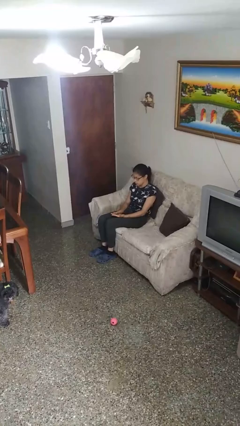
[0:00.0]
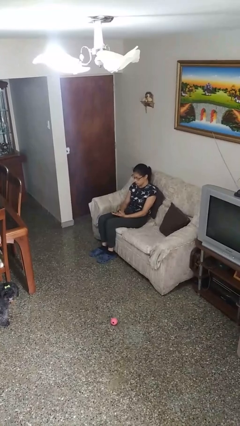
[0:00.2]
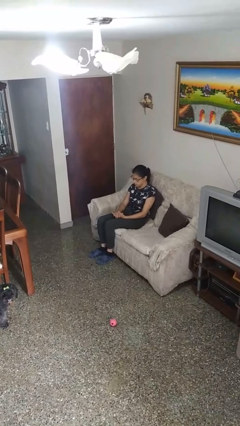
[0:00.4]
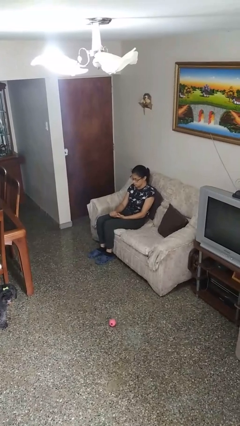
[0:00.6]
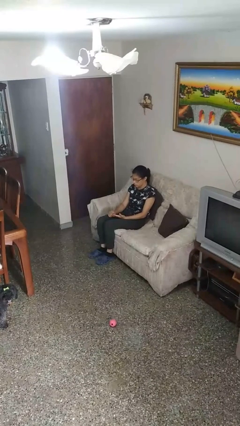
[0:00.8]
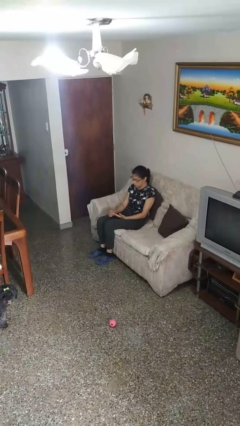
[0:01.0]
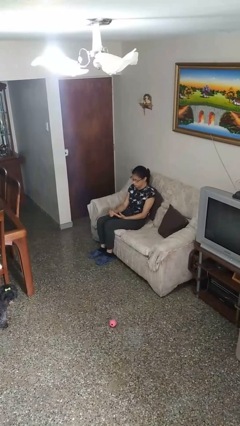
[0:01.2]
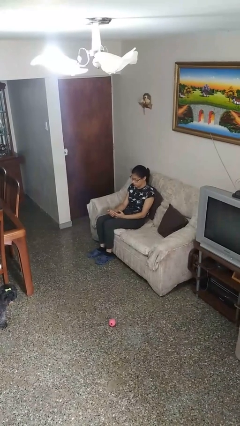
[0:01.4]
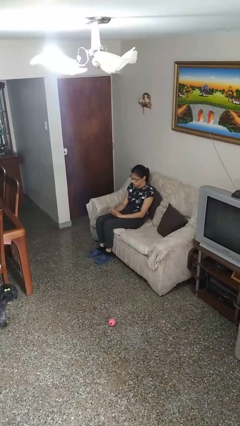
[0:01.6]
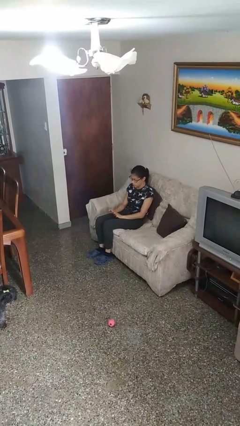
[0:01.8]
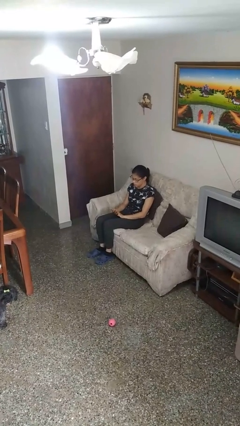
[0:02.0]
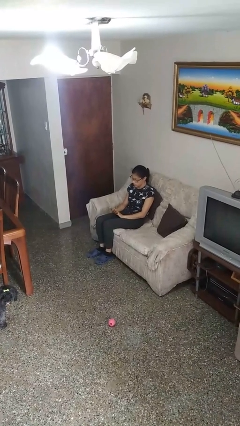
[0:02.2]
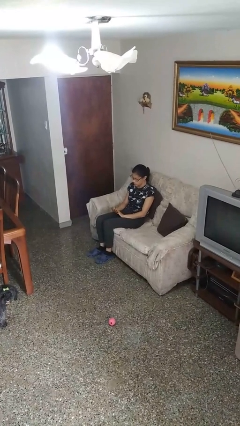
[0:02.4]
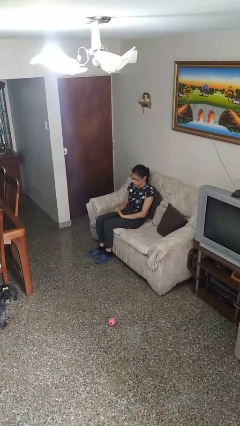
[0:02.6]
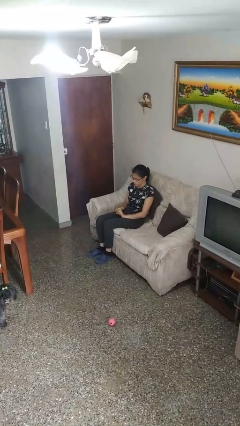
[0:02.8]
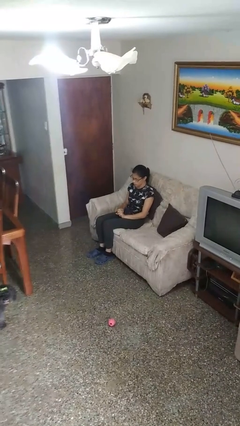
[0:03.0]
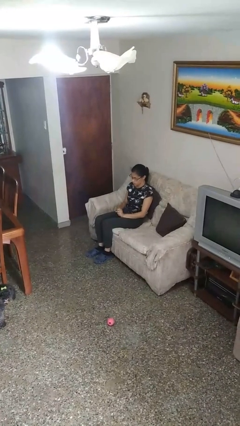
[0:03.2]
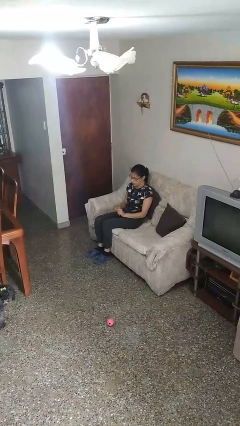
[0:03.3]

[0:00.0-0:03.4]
person looks at hands in lap

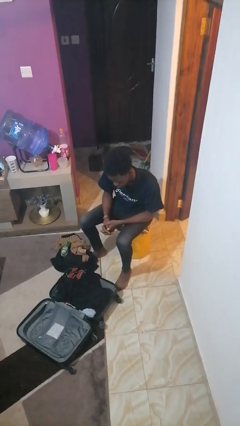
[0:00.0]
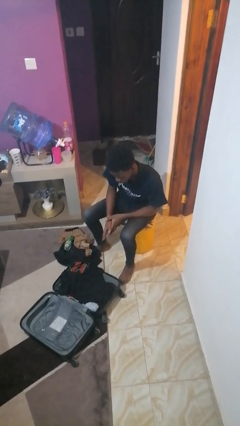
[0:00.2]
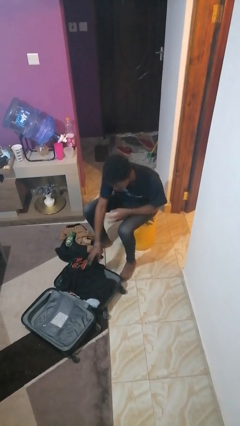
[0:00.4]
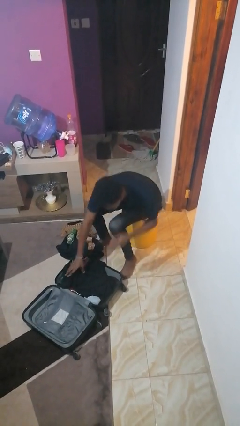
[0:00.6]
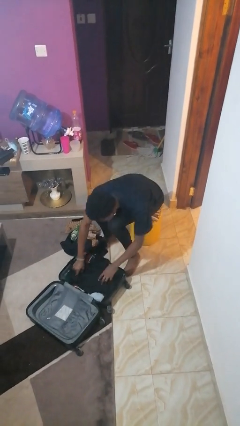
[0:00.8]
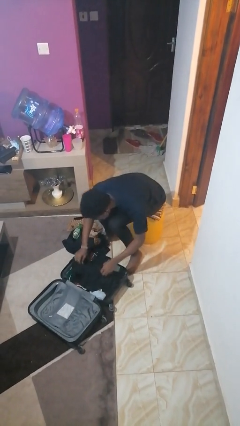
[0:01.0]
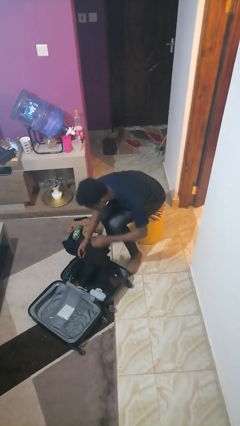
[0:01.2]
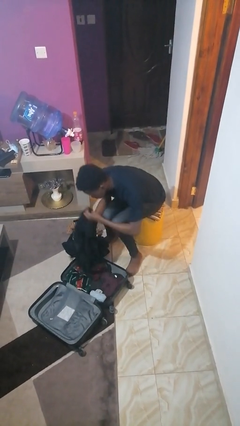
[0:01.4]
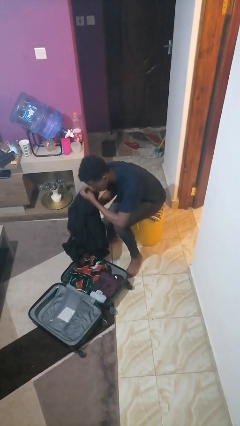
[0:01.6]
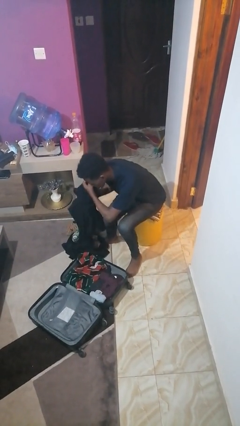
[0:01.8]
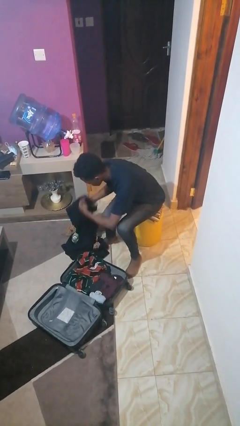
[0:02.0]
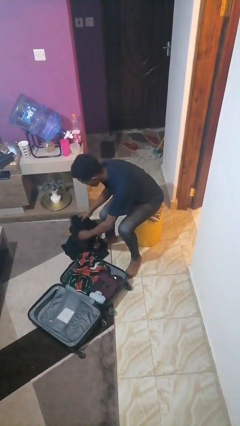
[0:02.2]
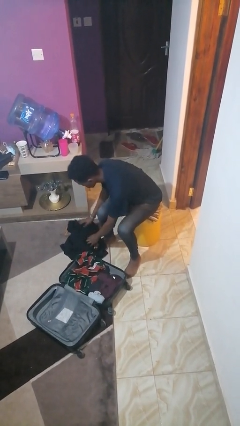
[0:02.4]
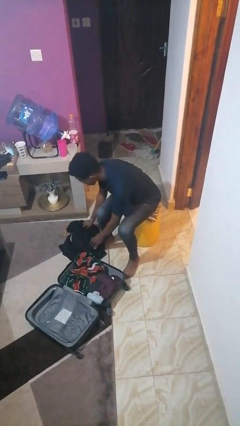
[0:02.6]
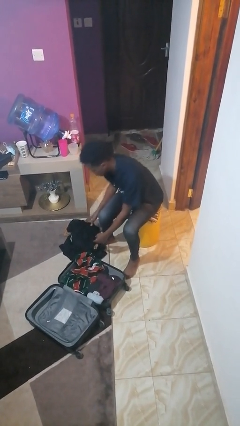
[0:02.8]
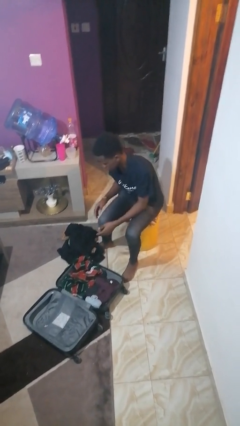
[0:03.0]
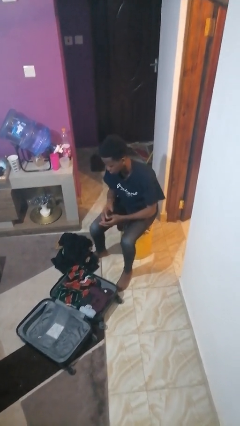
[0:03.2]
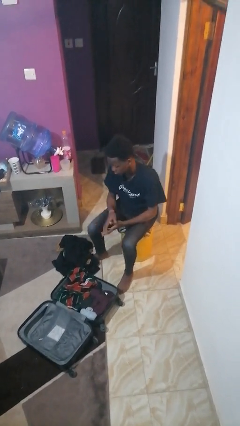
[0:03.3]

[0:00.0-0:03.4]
person unloads clothes from suitcase

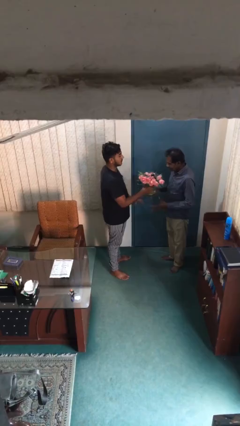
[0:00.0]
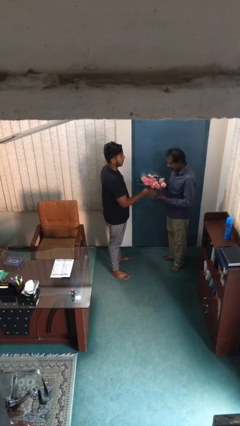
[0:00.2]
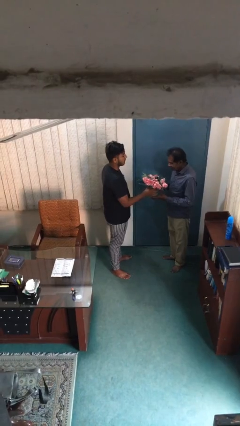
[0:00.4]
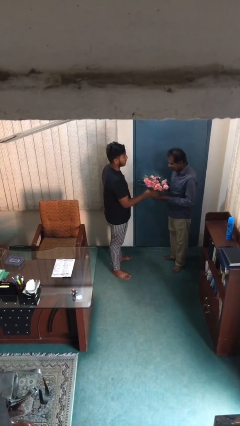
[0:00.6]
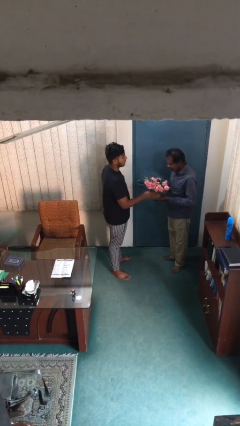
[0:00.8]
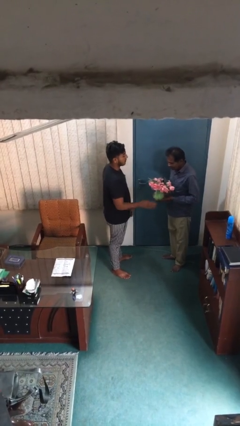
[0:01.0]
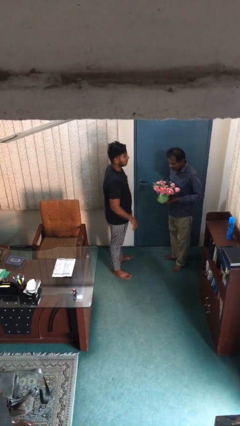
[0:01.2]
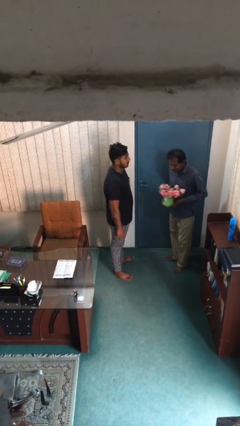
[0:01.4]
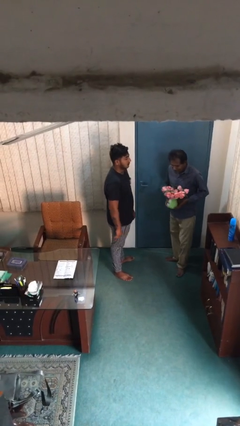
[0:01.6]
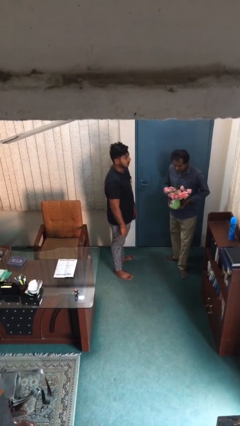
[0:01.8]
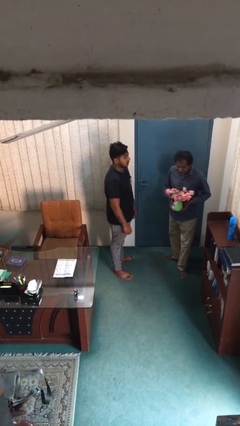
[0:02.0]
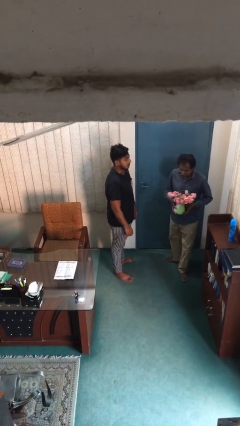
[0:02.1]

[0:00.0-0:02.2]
person transfers object to person

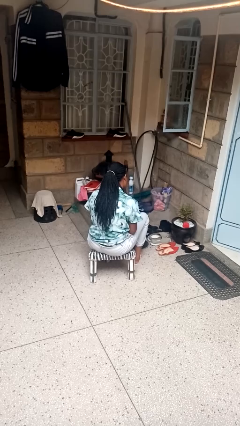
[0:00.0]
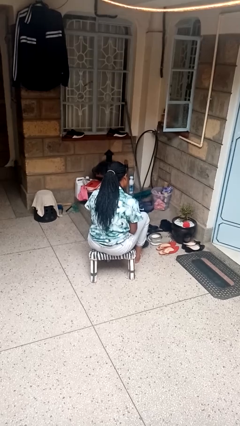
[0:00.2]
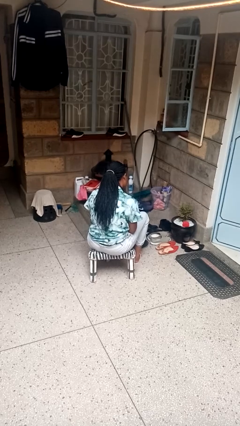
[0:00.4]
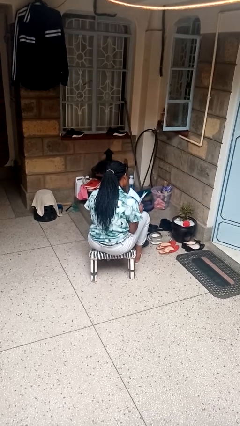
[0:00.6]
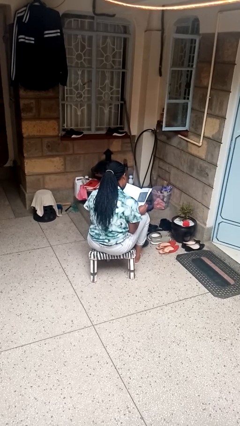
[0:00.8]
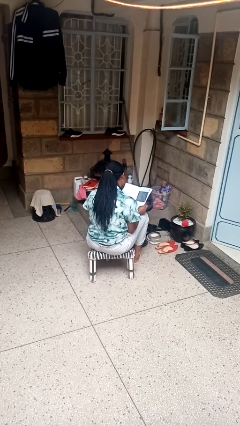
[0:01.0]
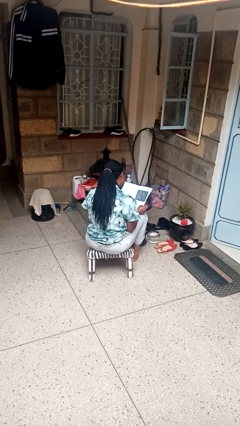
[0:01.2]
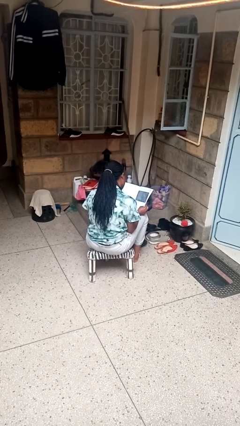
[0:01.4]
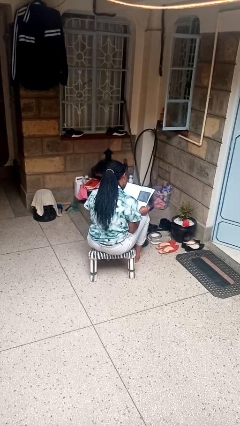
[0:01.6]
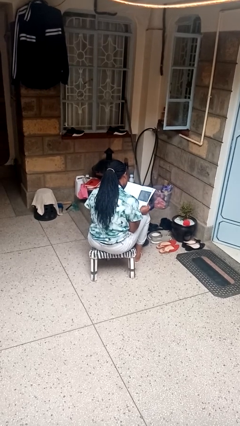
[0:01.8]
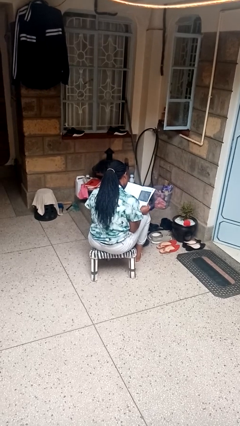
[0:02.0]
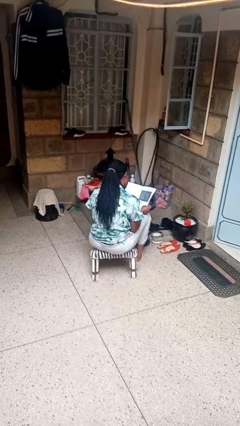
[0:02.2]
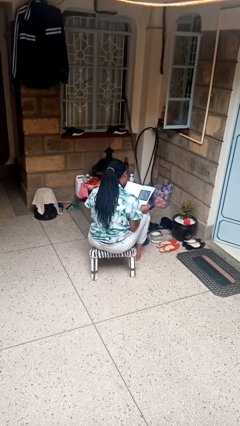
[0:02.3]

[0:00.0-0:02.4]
person reads magazine

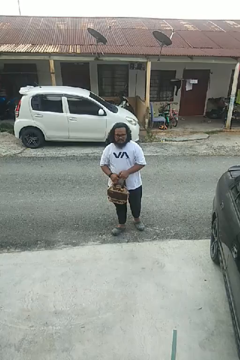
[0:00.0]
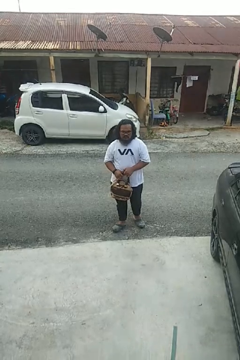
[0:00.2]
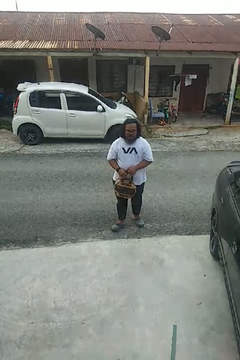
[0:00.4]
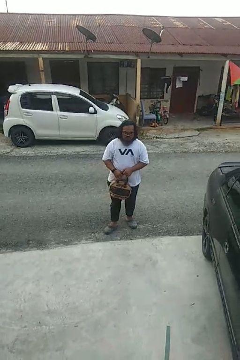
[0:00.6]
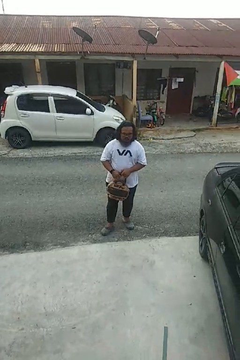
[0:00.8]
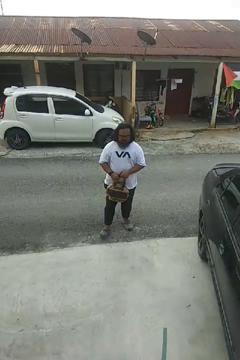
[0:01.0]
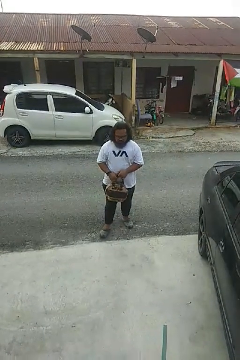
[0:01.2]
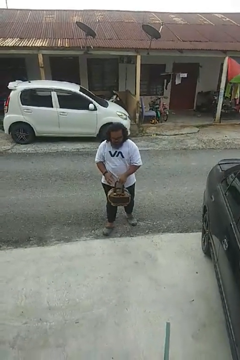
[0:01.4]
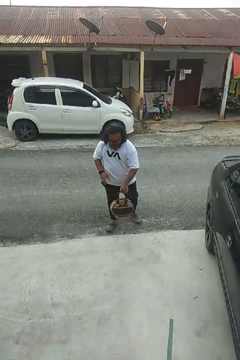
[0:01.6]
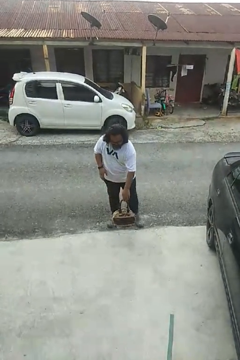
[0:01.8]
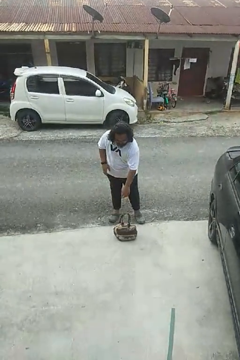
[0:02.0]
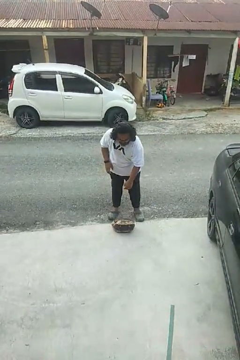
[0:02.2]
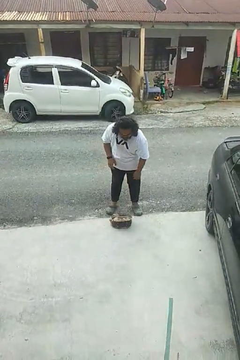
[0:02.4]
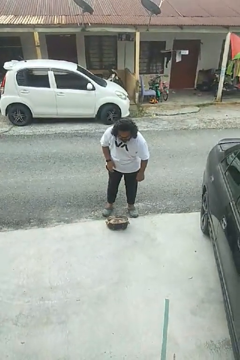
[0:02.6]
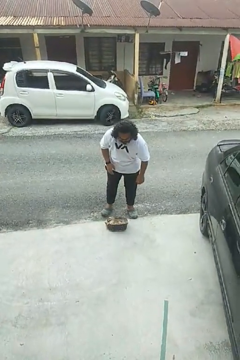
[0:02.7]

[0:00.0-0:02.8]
person drops object

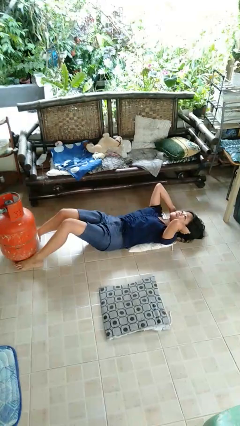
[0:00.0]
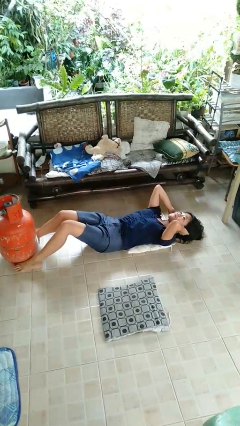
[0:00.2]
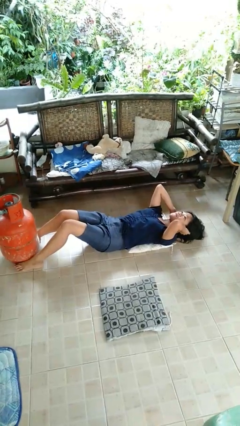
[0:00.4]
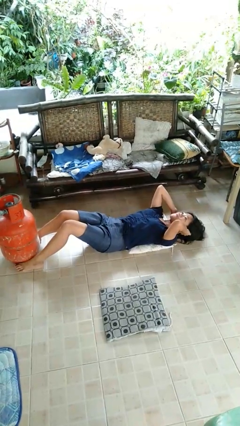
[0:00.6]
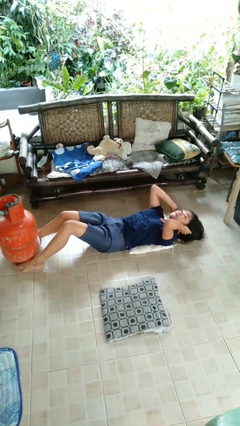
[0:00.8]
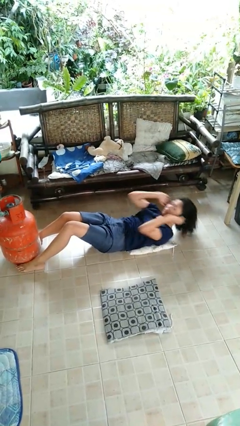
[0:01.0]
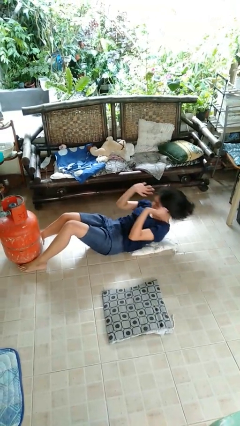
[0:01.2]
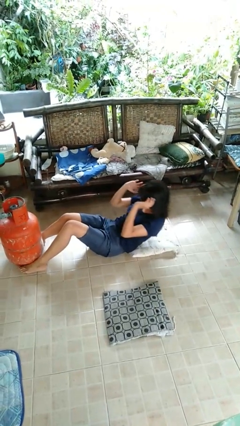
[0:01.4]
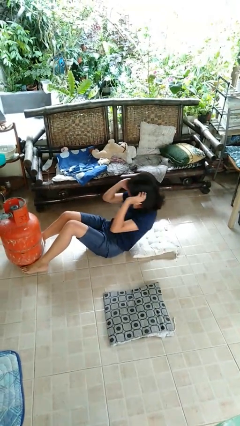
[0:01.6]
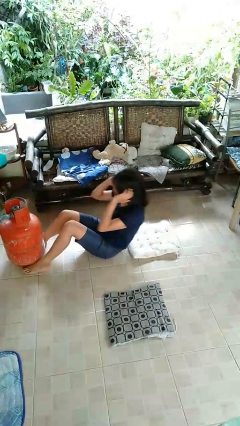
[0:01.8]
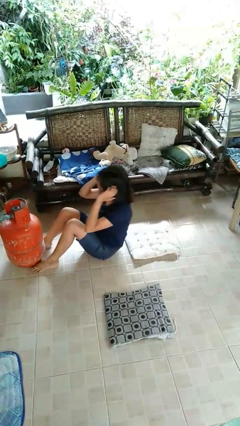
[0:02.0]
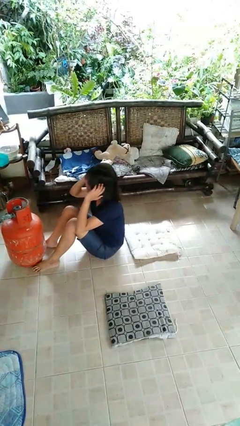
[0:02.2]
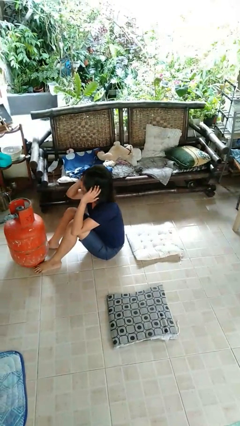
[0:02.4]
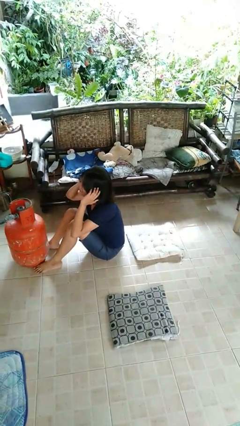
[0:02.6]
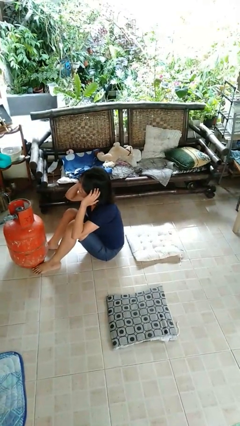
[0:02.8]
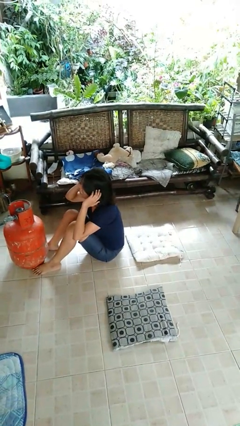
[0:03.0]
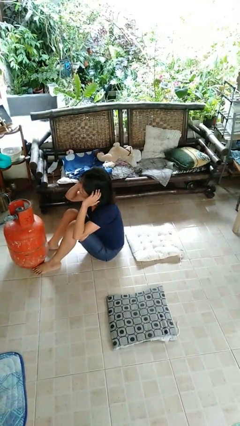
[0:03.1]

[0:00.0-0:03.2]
person exercises with situp

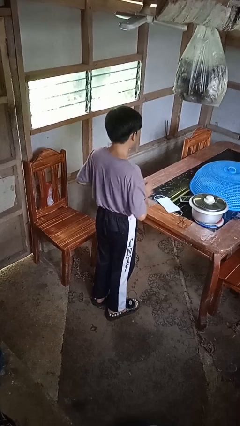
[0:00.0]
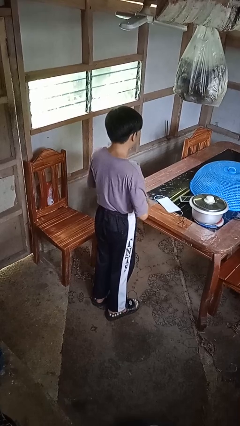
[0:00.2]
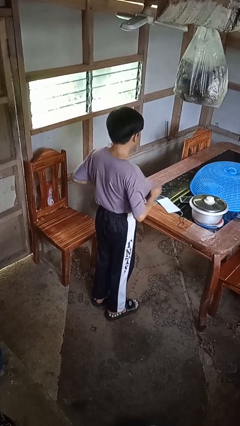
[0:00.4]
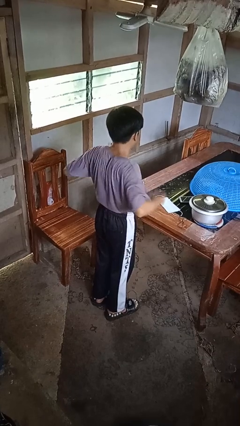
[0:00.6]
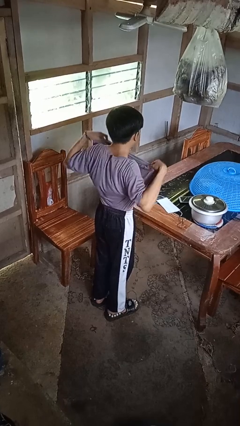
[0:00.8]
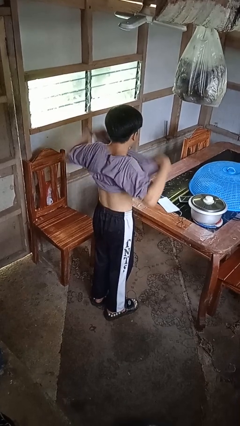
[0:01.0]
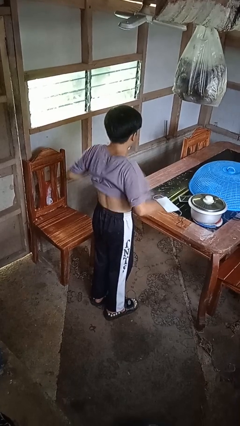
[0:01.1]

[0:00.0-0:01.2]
person untucks shirt
